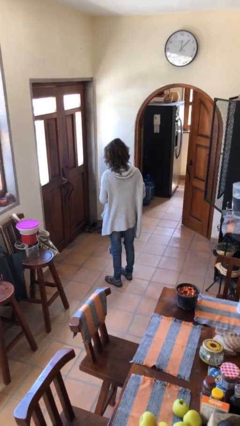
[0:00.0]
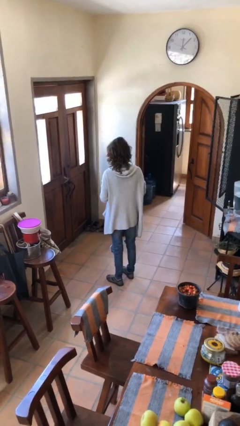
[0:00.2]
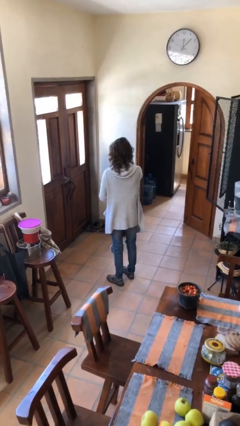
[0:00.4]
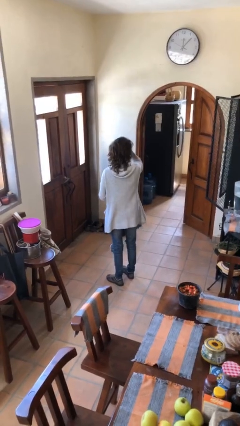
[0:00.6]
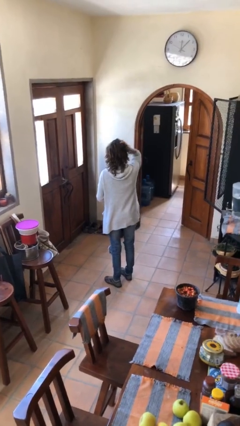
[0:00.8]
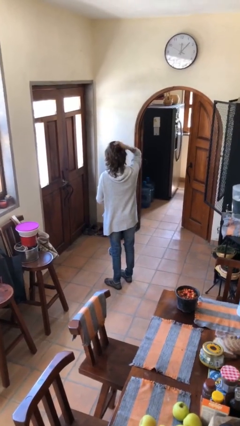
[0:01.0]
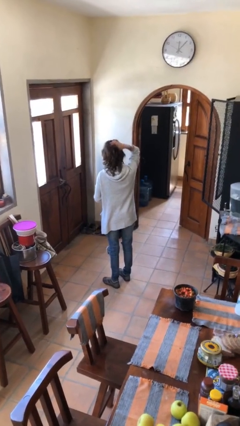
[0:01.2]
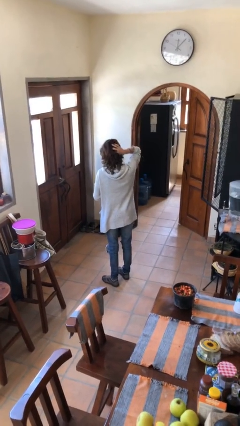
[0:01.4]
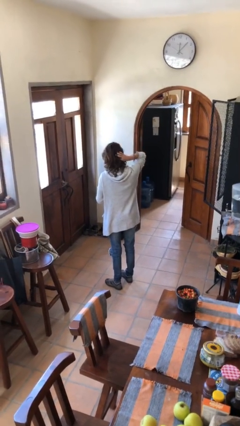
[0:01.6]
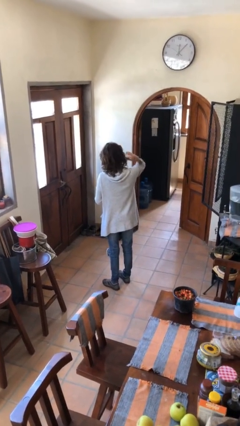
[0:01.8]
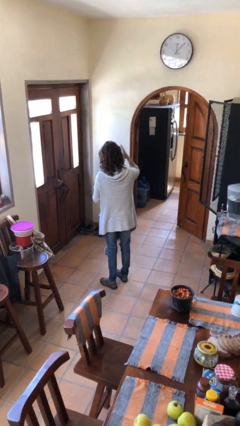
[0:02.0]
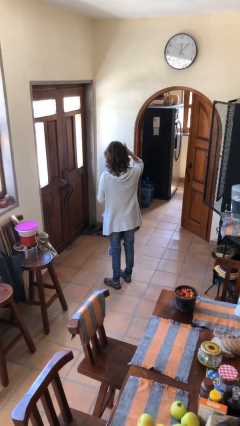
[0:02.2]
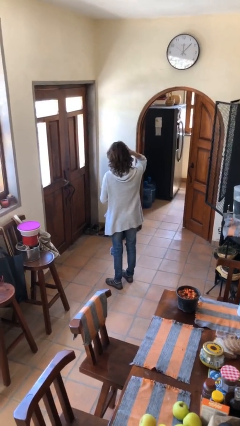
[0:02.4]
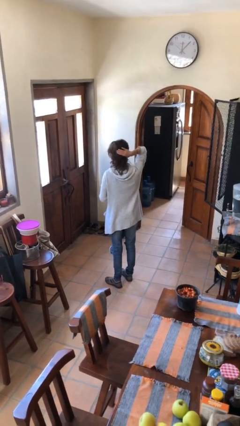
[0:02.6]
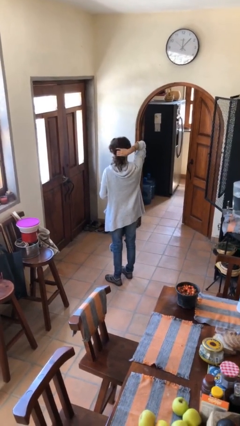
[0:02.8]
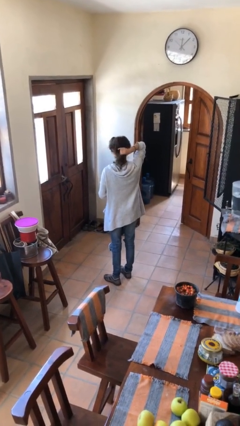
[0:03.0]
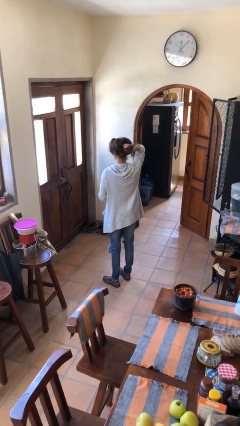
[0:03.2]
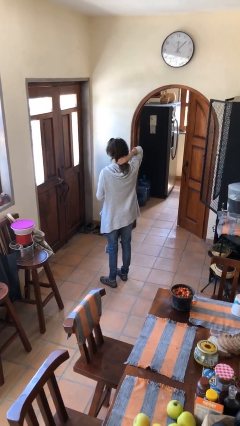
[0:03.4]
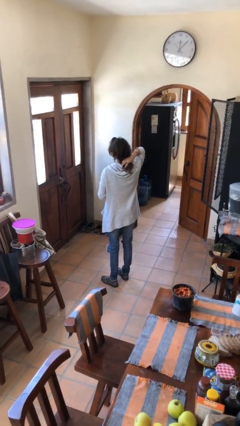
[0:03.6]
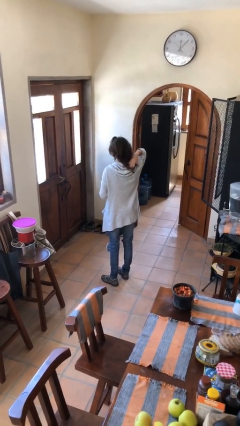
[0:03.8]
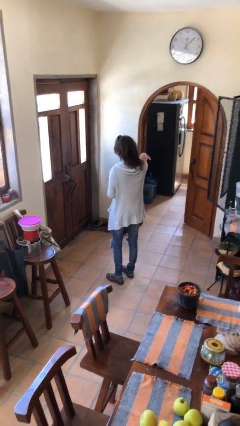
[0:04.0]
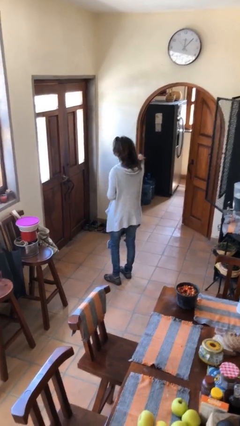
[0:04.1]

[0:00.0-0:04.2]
person strokes hair

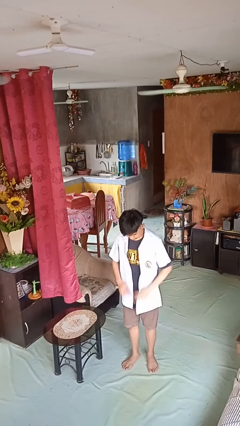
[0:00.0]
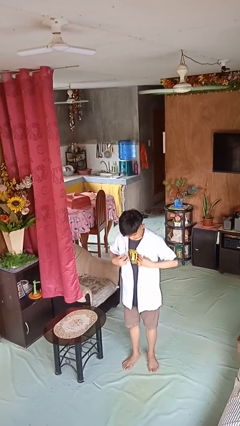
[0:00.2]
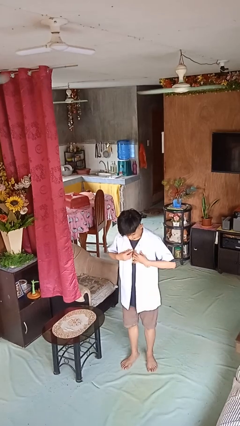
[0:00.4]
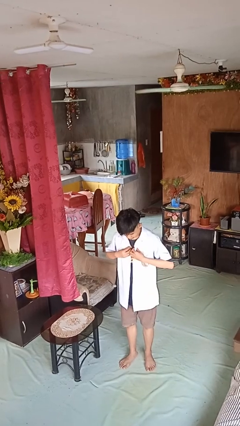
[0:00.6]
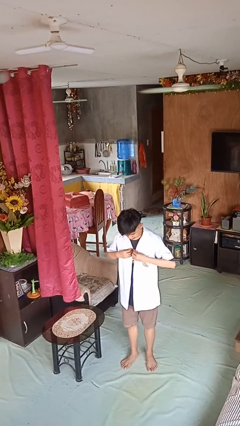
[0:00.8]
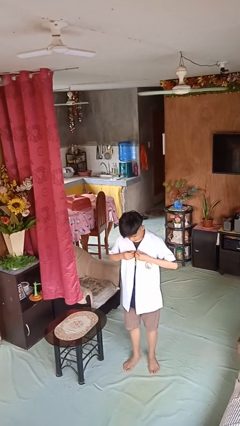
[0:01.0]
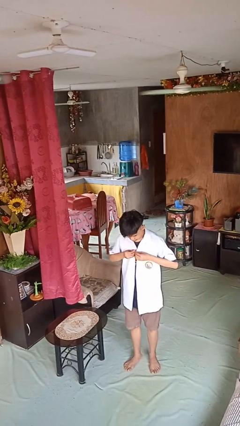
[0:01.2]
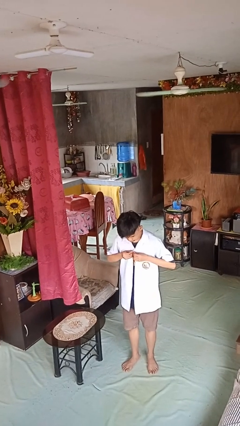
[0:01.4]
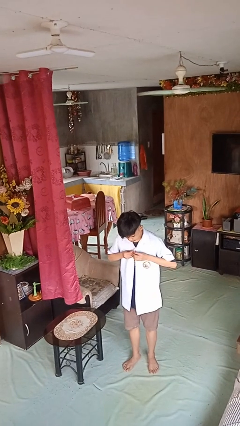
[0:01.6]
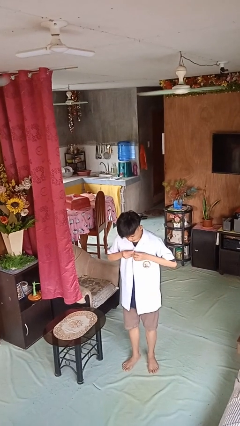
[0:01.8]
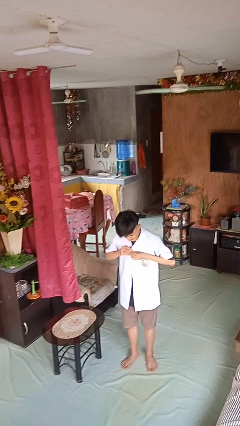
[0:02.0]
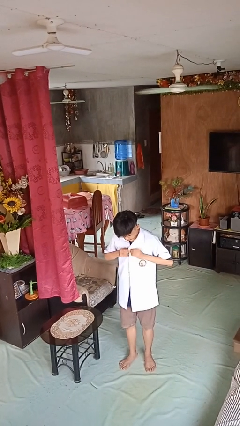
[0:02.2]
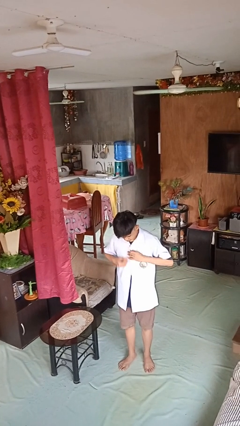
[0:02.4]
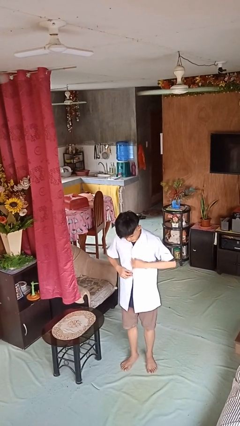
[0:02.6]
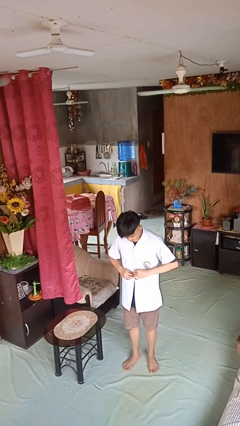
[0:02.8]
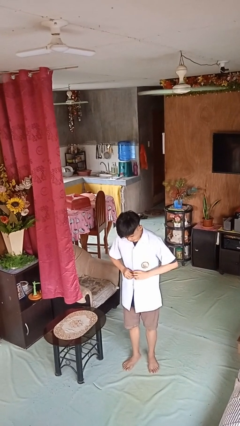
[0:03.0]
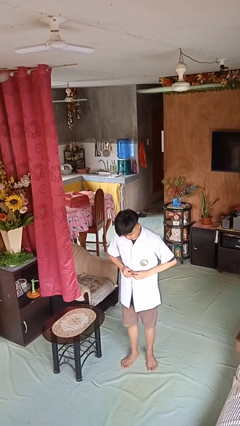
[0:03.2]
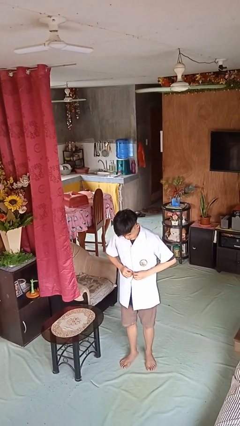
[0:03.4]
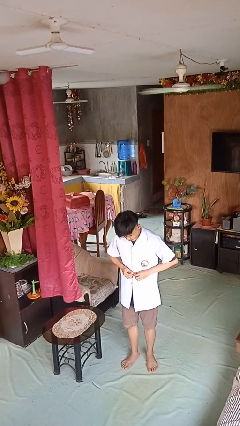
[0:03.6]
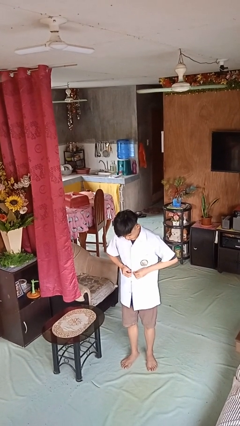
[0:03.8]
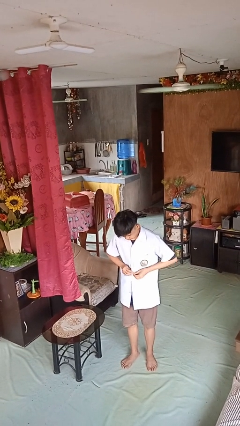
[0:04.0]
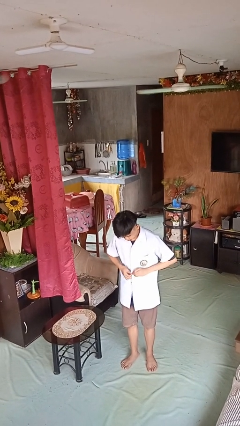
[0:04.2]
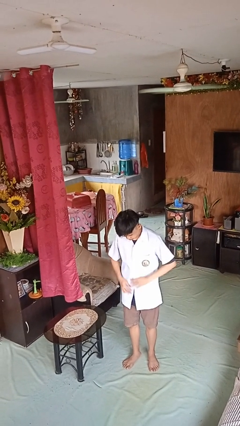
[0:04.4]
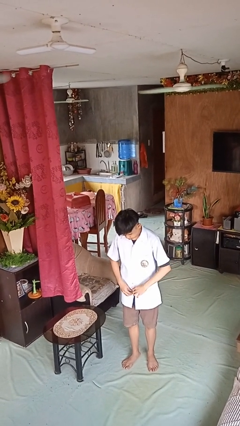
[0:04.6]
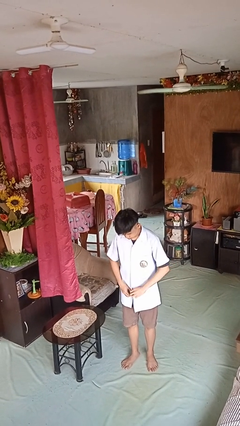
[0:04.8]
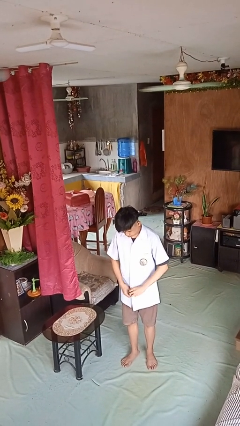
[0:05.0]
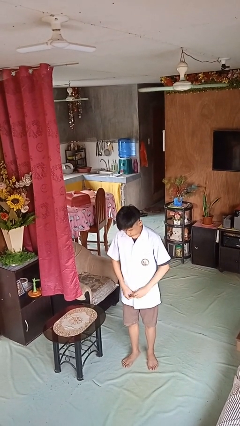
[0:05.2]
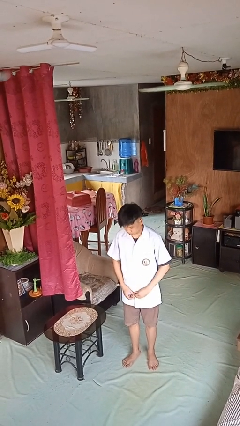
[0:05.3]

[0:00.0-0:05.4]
person buttons shirt

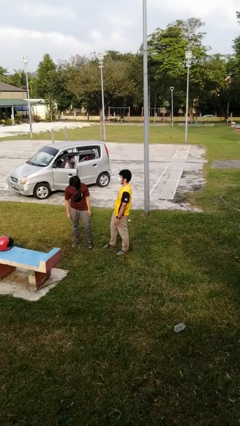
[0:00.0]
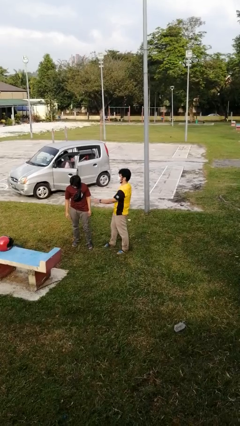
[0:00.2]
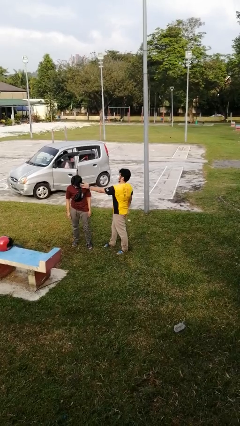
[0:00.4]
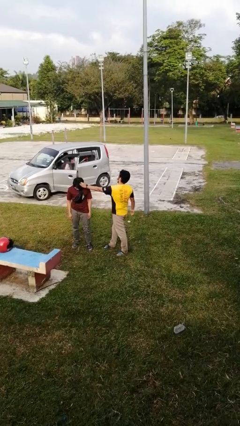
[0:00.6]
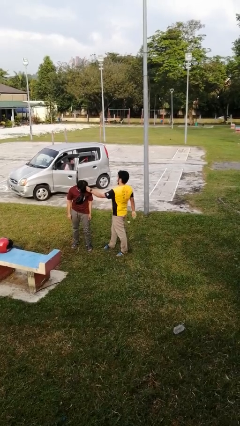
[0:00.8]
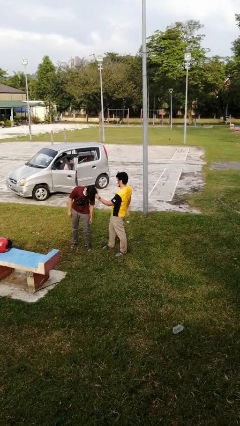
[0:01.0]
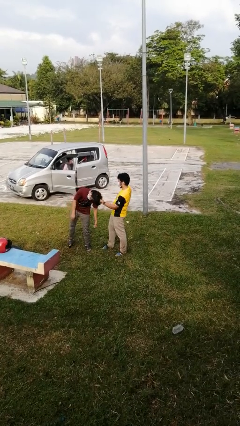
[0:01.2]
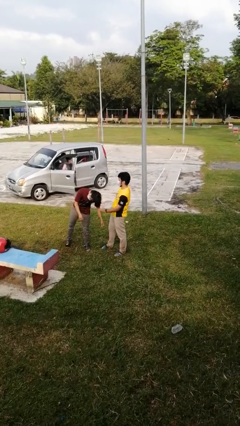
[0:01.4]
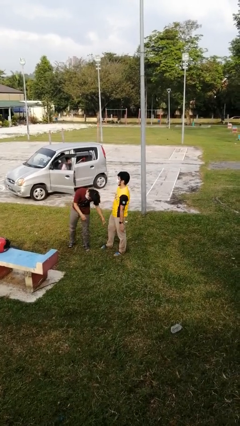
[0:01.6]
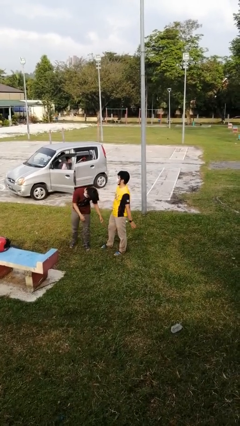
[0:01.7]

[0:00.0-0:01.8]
person grabs person by hair

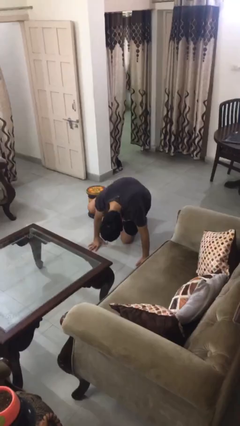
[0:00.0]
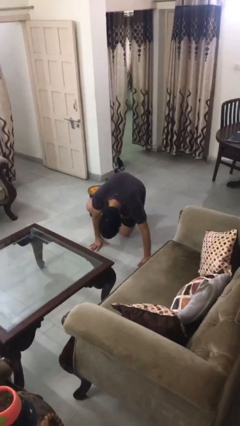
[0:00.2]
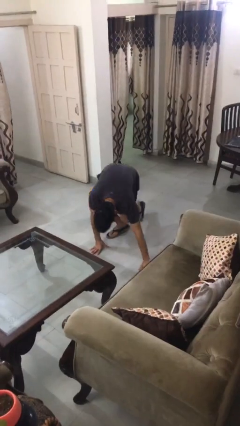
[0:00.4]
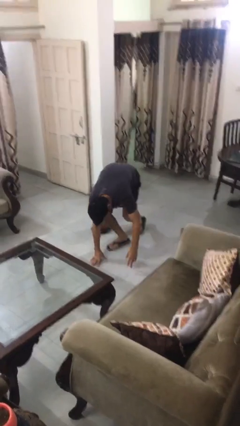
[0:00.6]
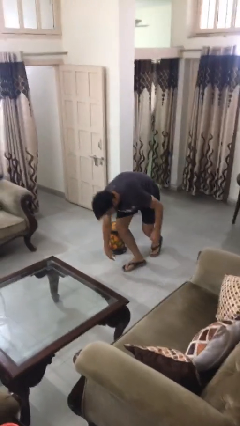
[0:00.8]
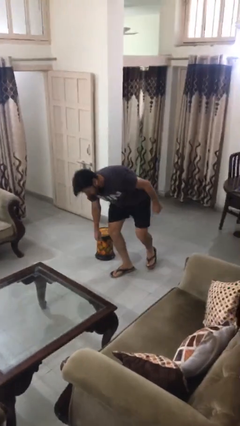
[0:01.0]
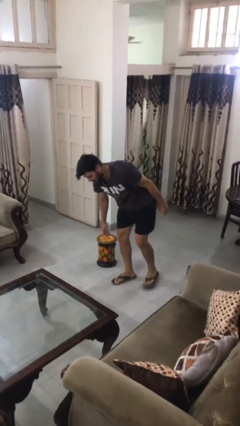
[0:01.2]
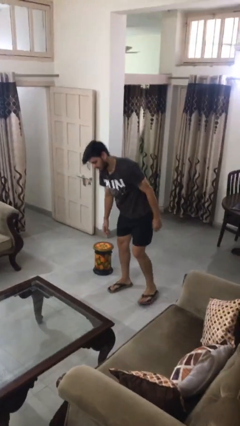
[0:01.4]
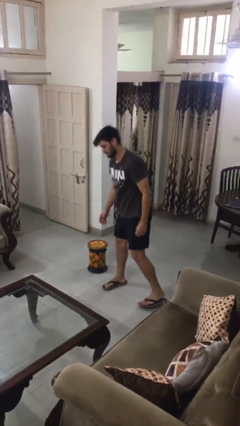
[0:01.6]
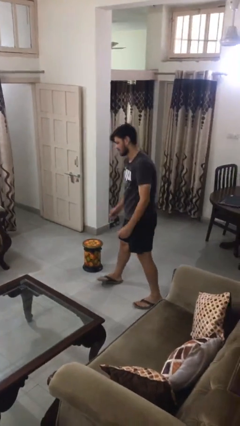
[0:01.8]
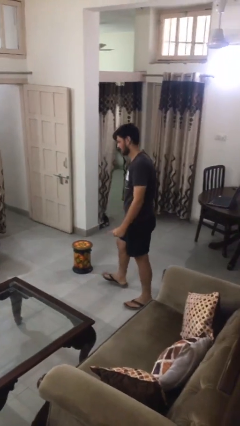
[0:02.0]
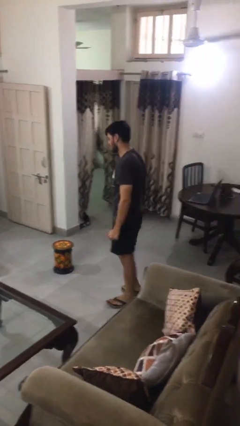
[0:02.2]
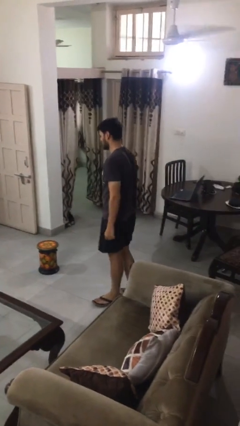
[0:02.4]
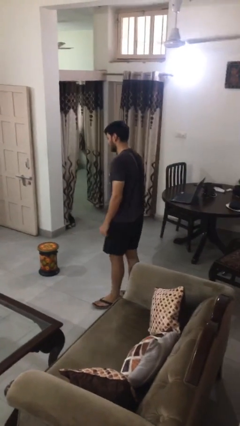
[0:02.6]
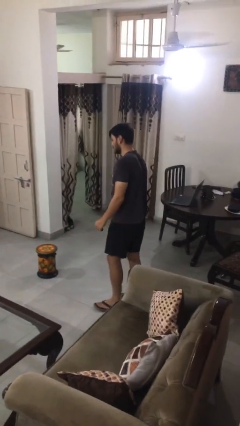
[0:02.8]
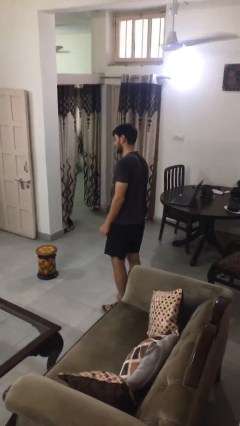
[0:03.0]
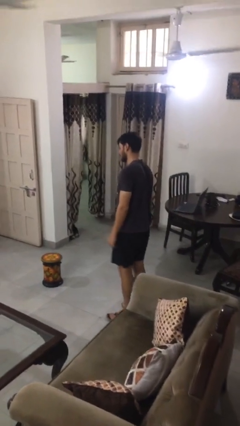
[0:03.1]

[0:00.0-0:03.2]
person stands up from floor

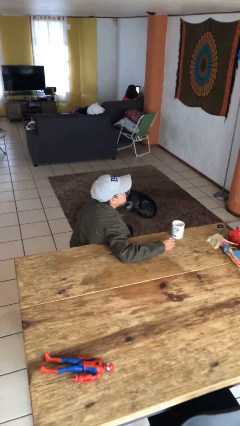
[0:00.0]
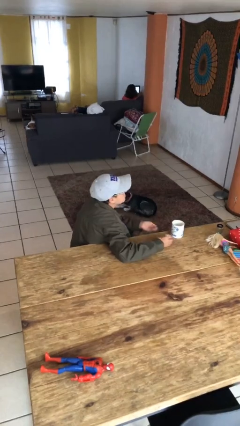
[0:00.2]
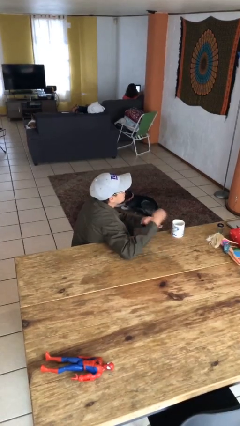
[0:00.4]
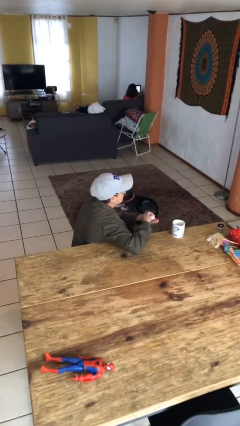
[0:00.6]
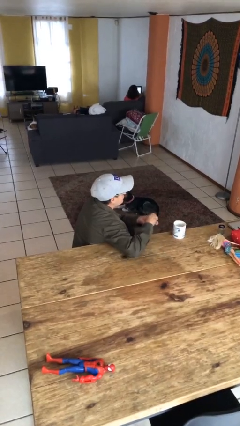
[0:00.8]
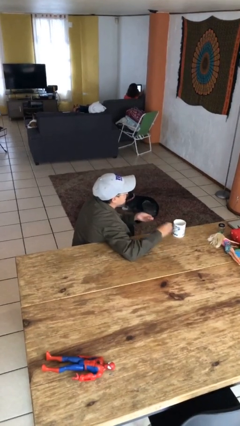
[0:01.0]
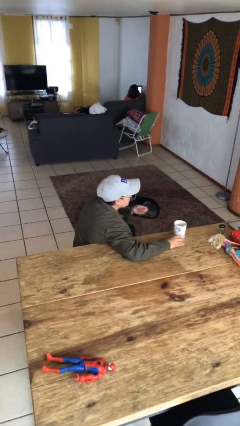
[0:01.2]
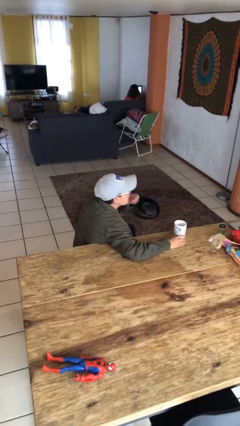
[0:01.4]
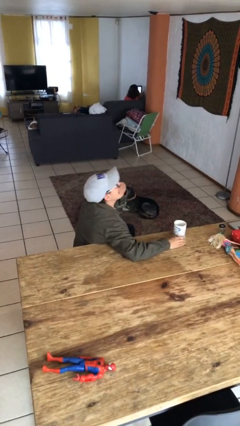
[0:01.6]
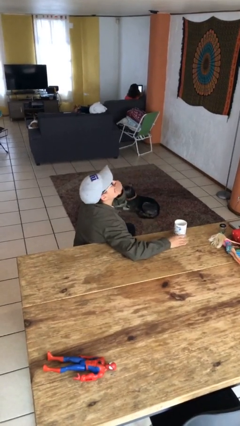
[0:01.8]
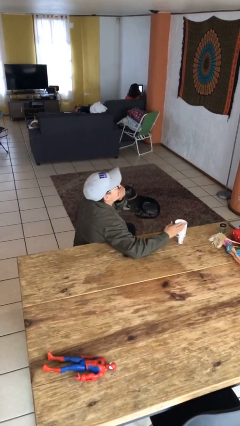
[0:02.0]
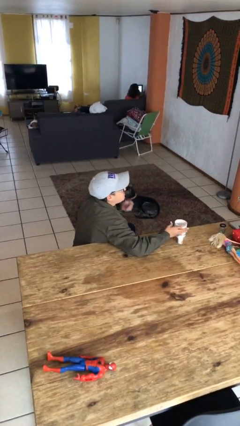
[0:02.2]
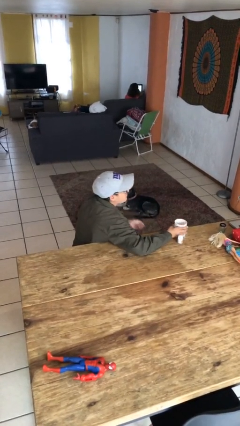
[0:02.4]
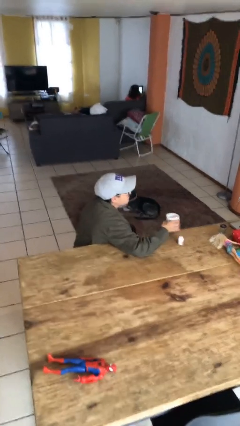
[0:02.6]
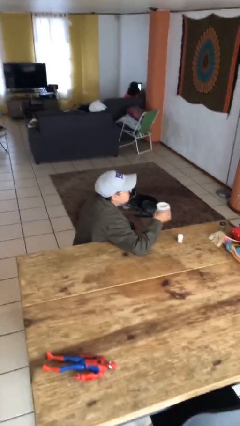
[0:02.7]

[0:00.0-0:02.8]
person takes medicine pills

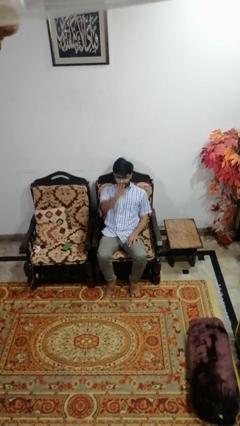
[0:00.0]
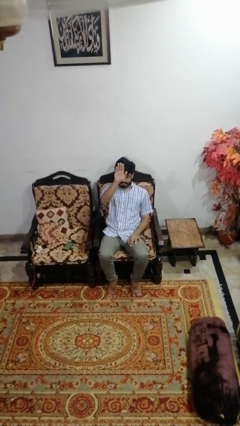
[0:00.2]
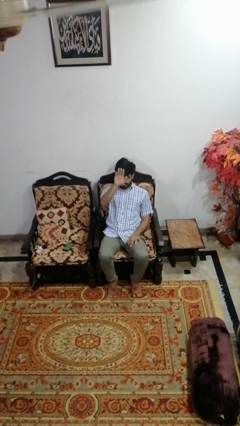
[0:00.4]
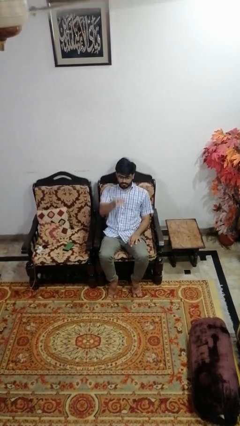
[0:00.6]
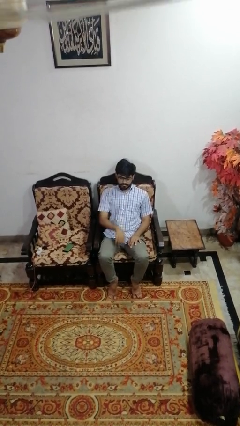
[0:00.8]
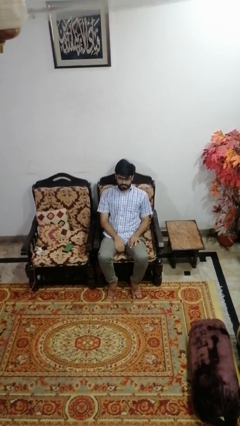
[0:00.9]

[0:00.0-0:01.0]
person gestures swipe up
